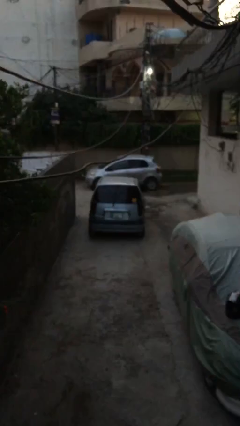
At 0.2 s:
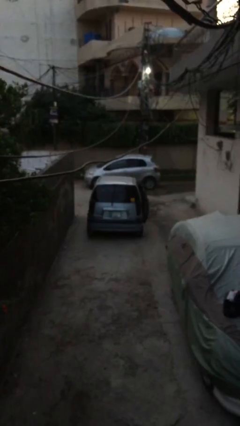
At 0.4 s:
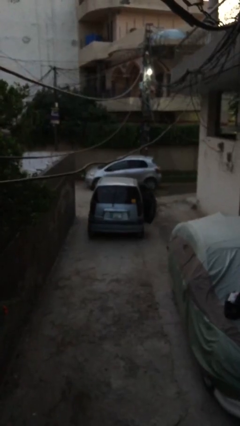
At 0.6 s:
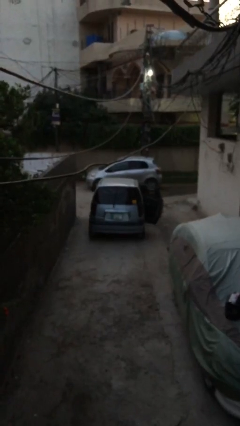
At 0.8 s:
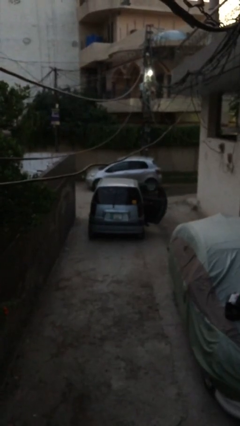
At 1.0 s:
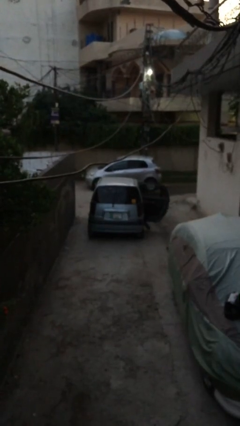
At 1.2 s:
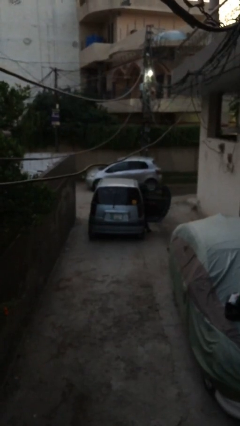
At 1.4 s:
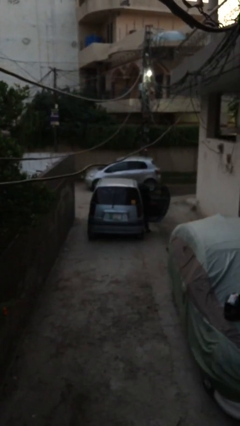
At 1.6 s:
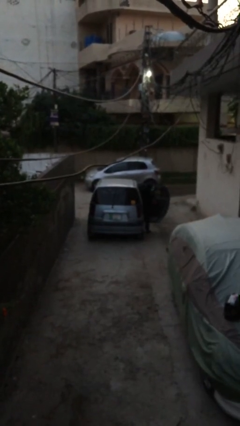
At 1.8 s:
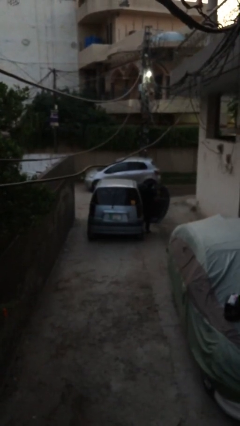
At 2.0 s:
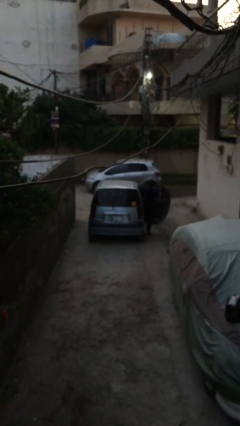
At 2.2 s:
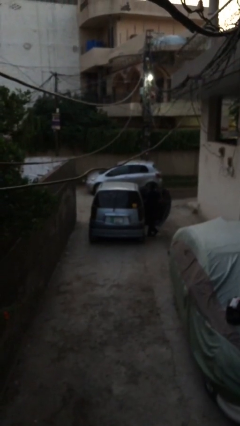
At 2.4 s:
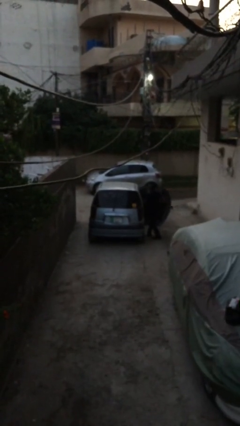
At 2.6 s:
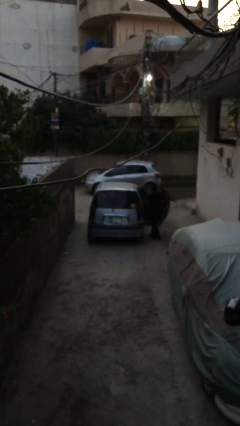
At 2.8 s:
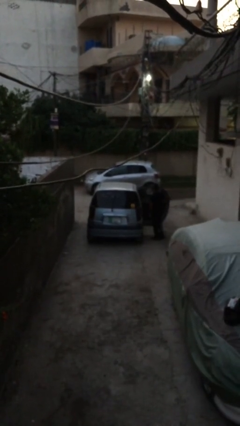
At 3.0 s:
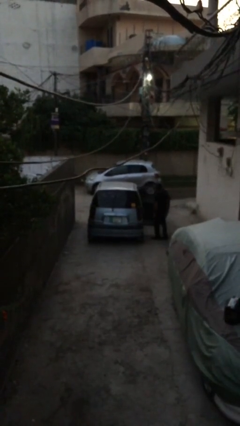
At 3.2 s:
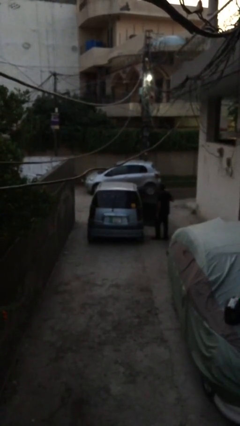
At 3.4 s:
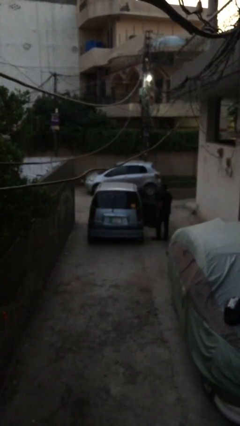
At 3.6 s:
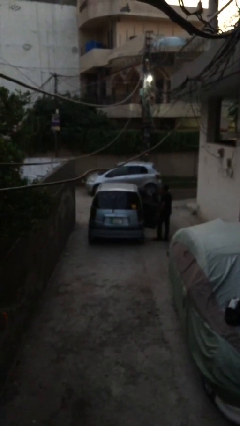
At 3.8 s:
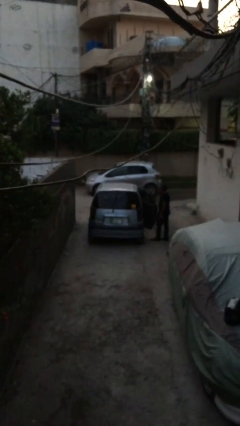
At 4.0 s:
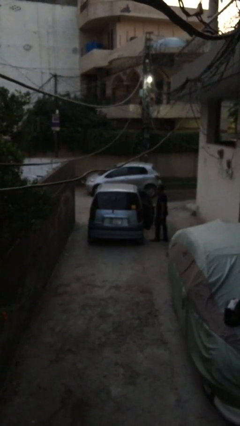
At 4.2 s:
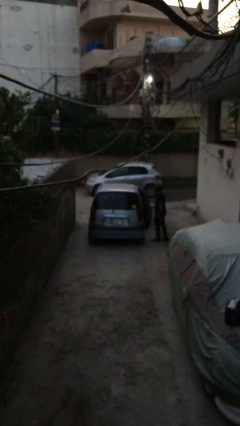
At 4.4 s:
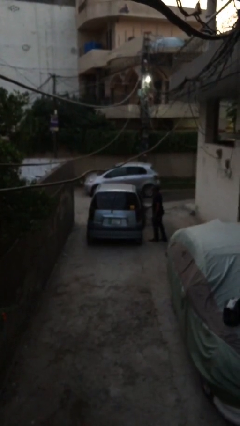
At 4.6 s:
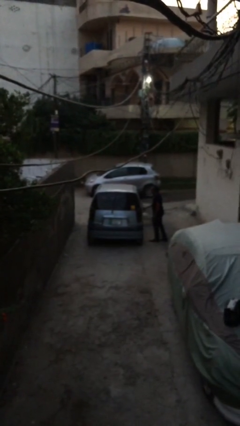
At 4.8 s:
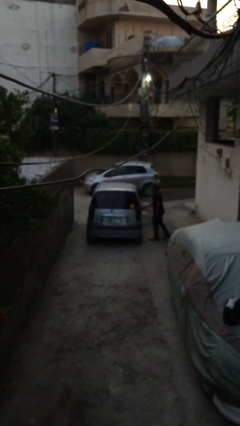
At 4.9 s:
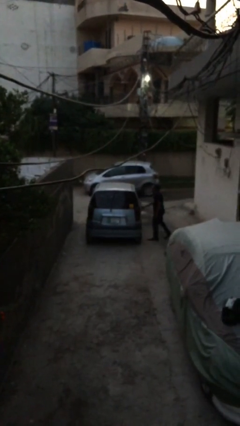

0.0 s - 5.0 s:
car drops off person

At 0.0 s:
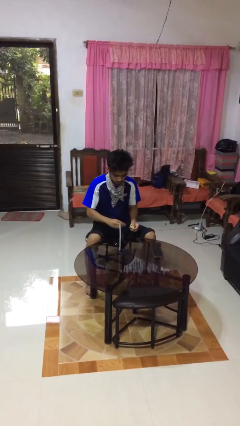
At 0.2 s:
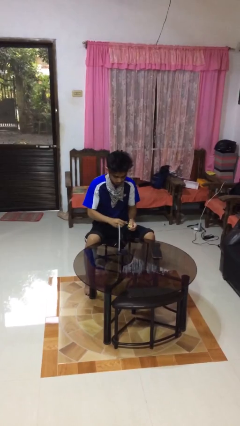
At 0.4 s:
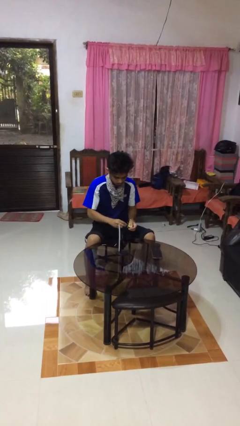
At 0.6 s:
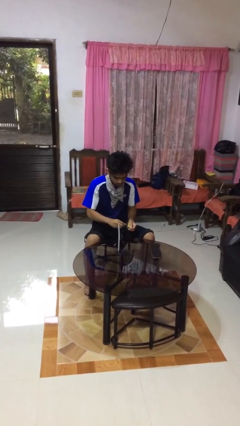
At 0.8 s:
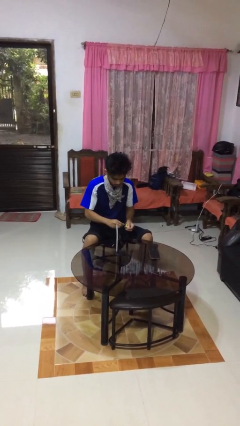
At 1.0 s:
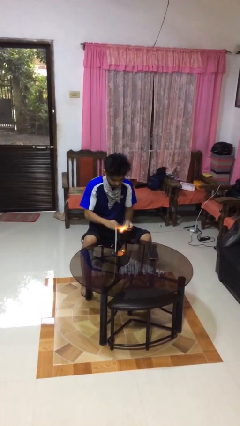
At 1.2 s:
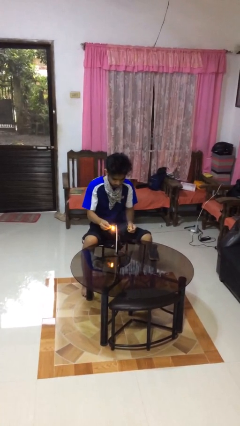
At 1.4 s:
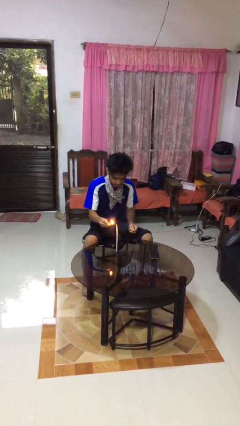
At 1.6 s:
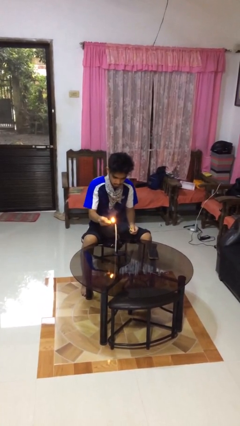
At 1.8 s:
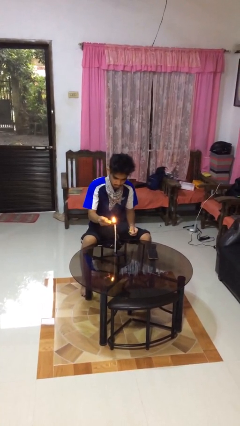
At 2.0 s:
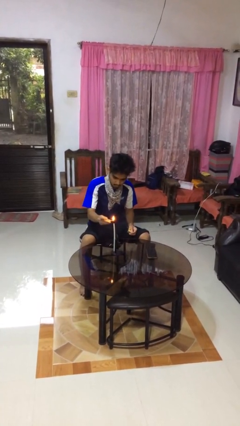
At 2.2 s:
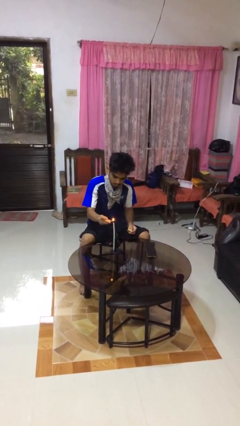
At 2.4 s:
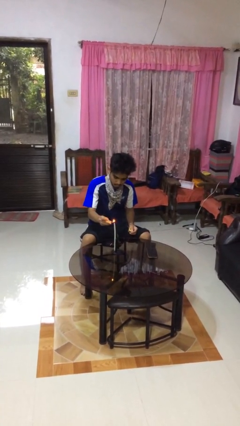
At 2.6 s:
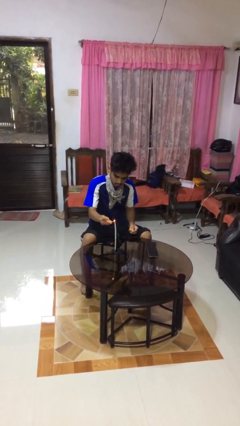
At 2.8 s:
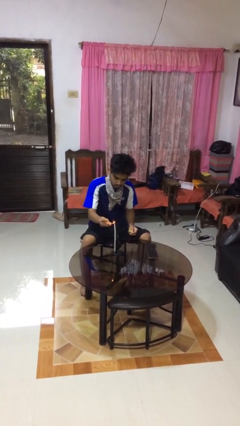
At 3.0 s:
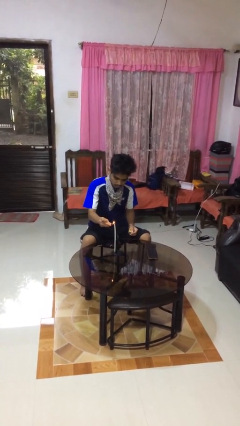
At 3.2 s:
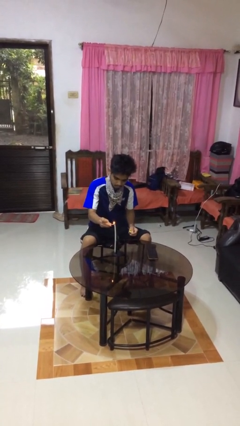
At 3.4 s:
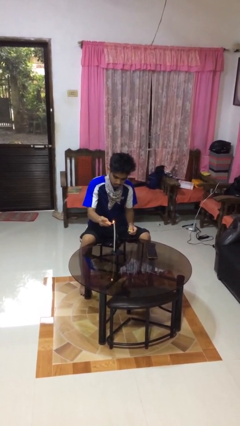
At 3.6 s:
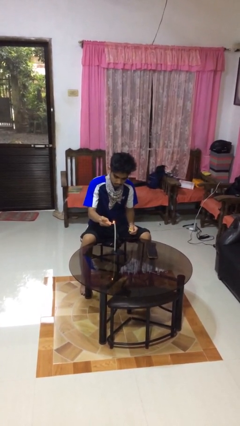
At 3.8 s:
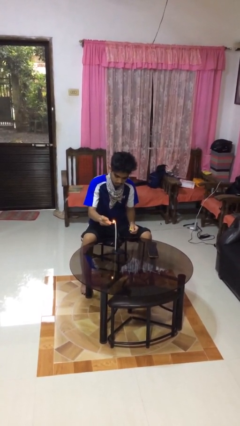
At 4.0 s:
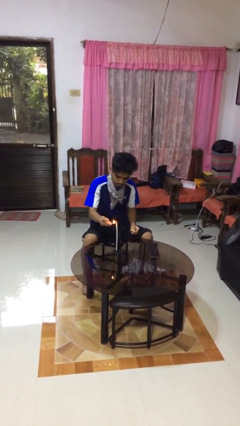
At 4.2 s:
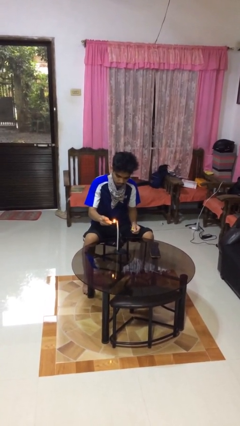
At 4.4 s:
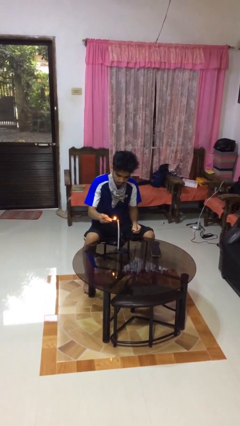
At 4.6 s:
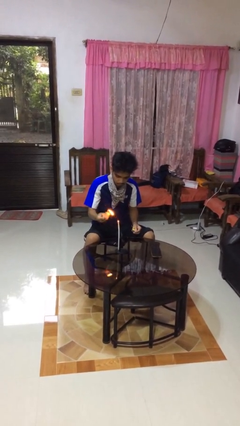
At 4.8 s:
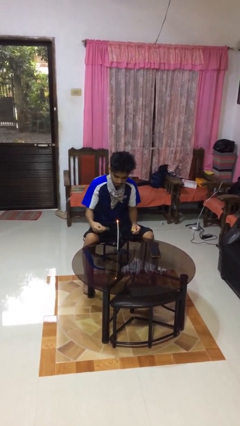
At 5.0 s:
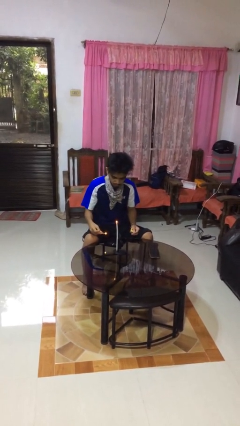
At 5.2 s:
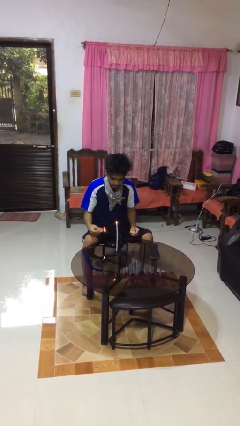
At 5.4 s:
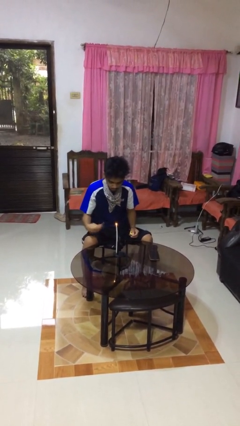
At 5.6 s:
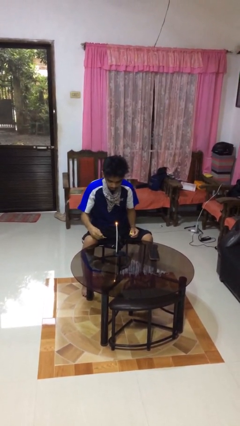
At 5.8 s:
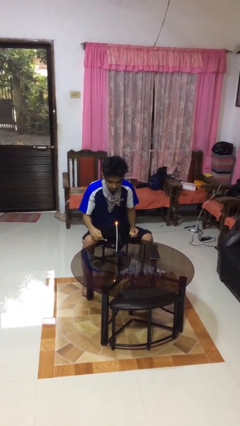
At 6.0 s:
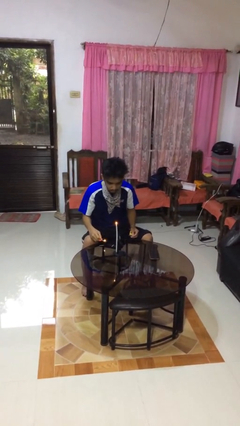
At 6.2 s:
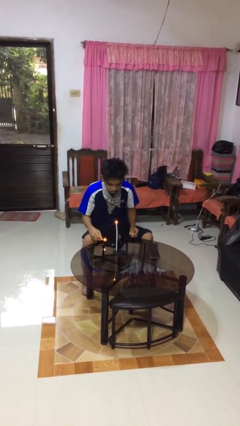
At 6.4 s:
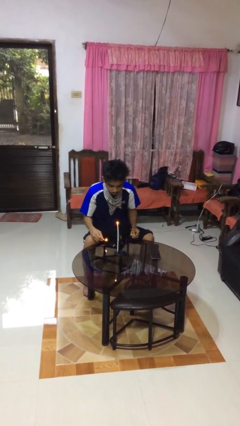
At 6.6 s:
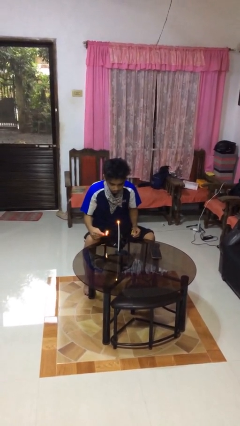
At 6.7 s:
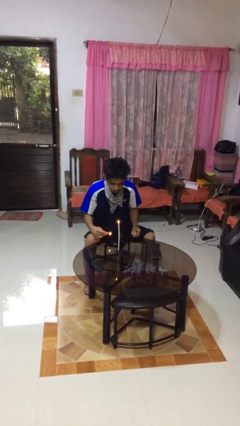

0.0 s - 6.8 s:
person lights candle

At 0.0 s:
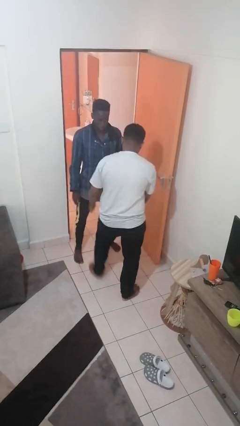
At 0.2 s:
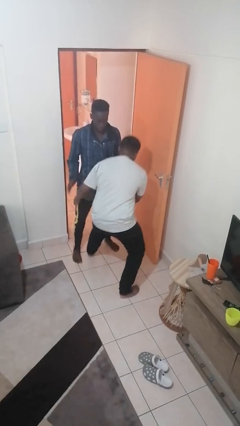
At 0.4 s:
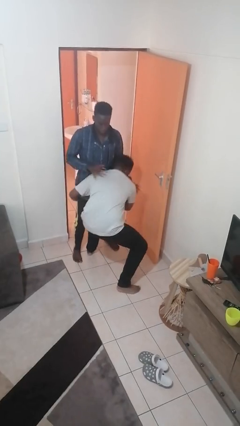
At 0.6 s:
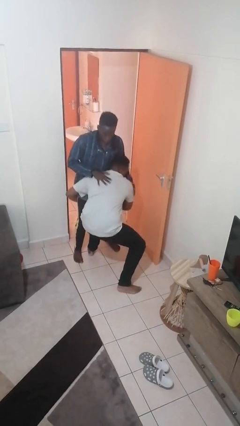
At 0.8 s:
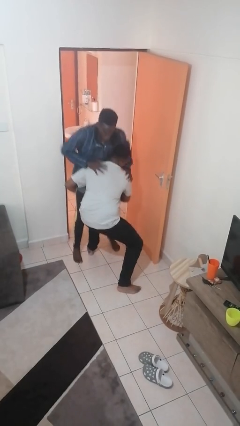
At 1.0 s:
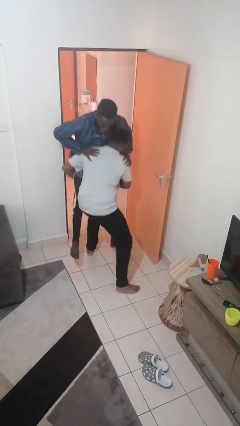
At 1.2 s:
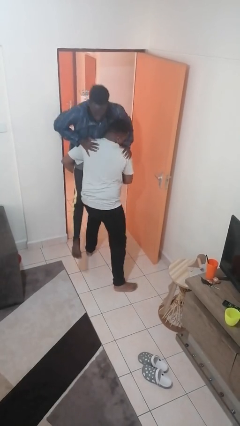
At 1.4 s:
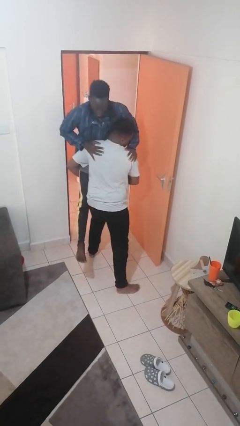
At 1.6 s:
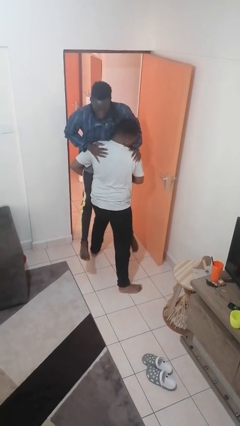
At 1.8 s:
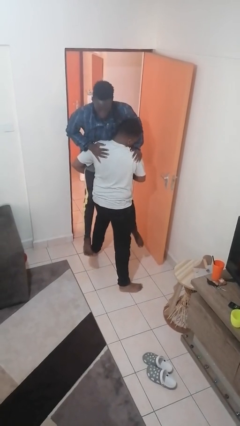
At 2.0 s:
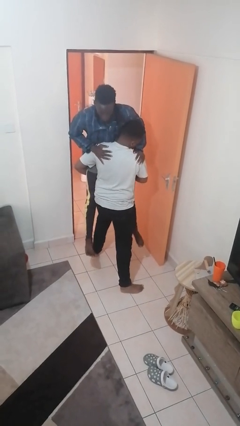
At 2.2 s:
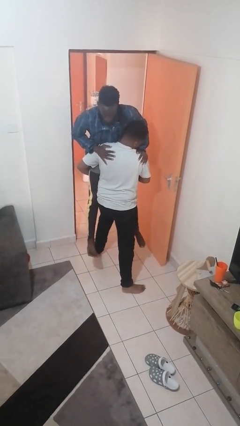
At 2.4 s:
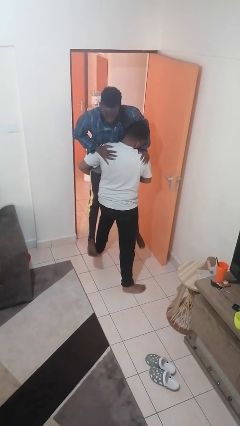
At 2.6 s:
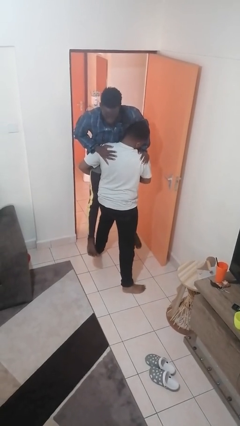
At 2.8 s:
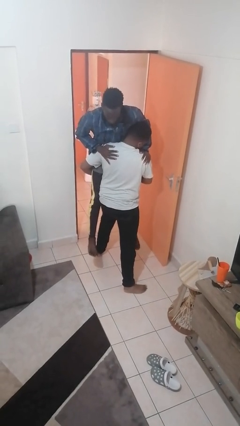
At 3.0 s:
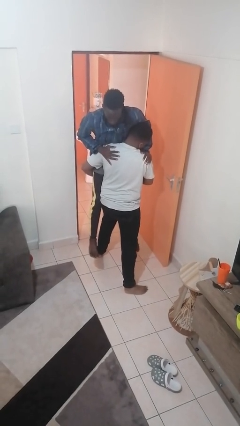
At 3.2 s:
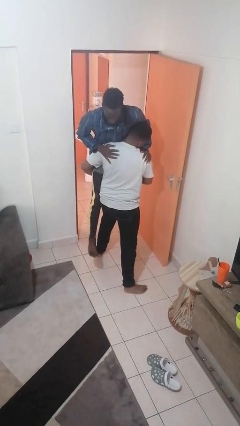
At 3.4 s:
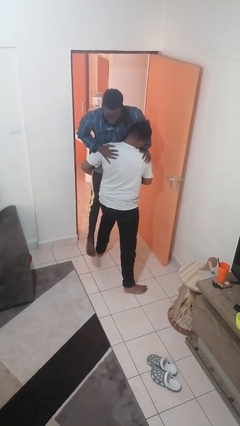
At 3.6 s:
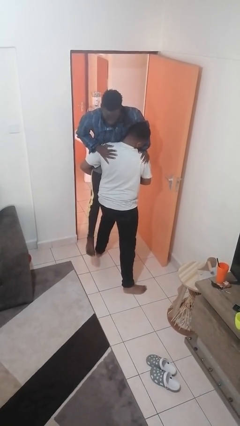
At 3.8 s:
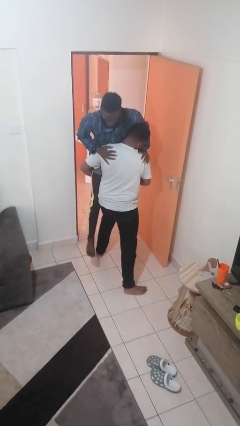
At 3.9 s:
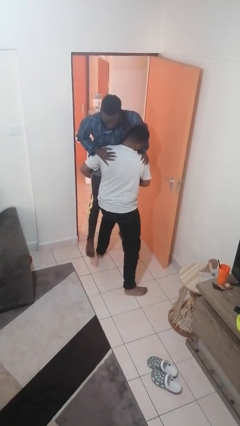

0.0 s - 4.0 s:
person picks up person

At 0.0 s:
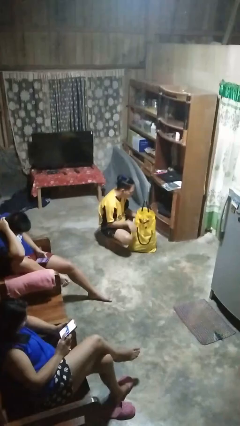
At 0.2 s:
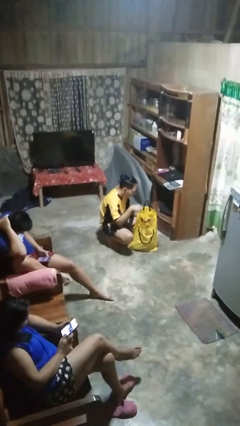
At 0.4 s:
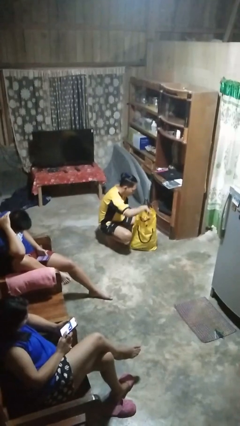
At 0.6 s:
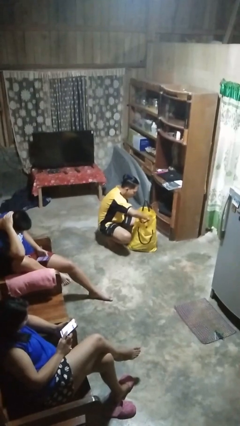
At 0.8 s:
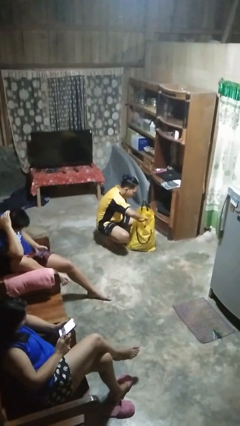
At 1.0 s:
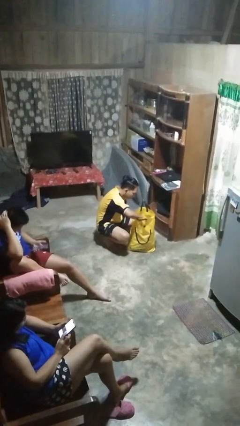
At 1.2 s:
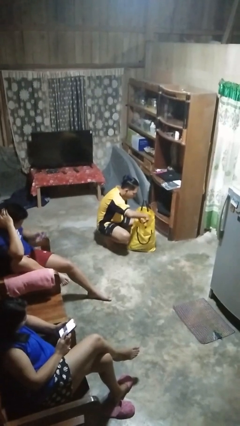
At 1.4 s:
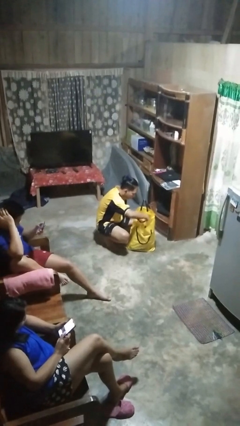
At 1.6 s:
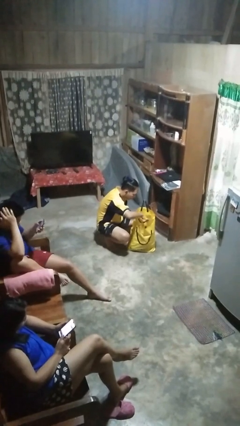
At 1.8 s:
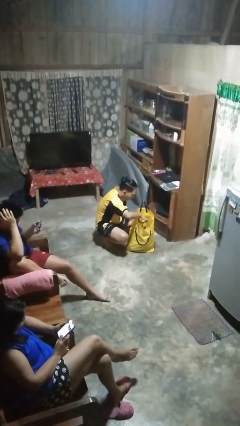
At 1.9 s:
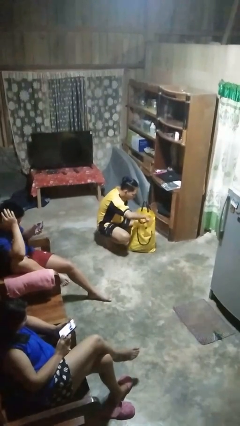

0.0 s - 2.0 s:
person searches in bag
